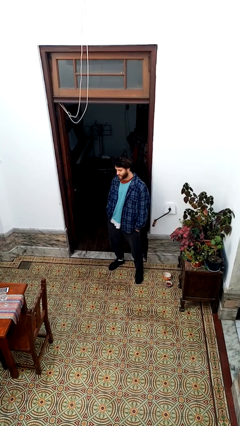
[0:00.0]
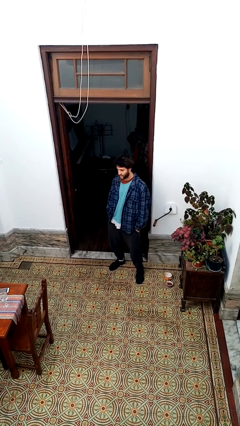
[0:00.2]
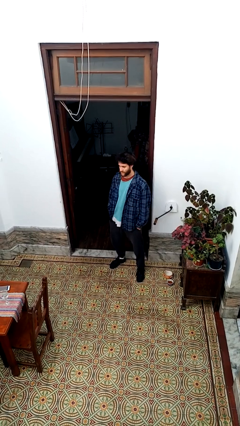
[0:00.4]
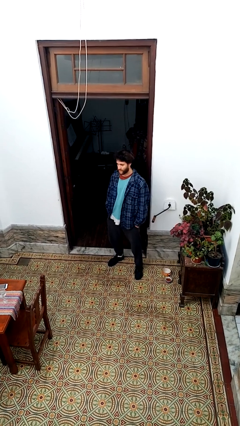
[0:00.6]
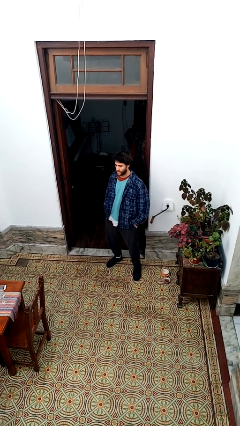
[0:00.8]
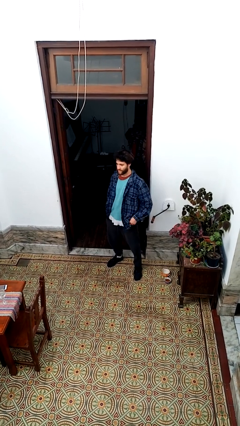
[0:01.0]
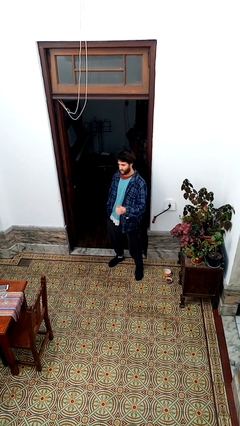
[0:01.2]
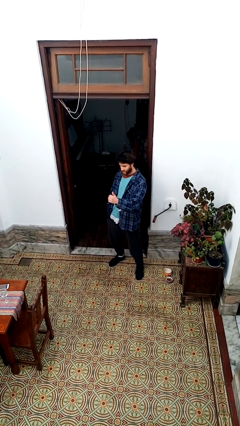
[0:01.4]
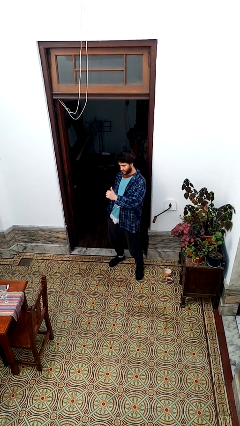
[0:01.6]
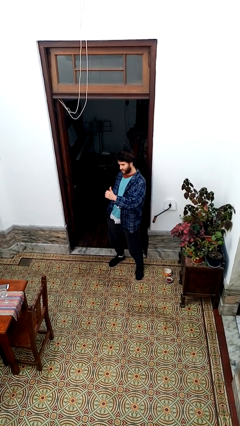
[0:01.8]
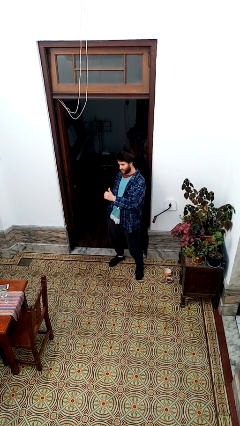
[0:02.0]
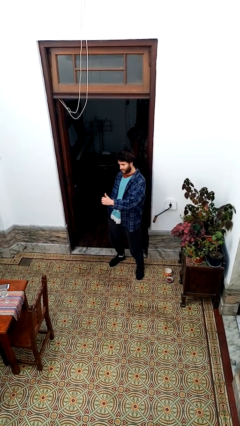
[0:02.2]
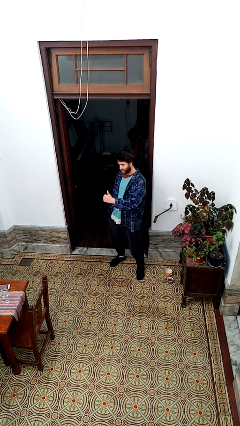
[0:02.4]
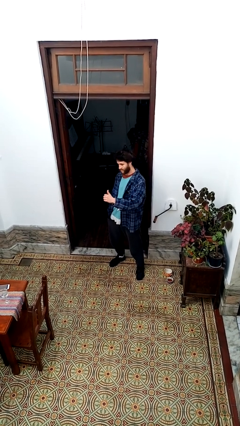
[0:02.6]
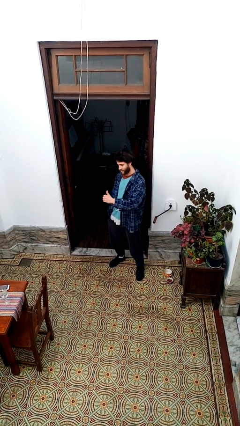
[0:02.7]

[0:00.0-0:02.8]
person gestures thumbs up

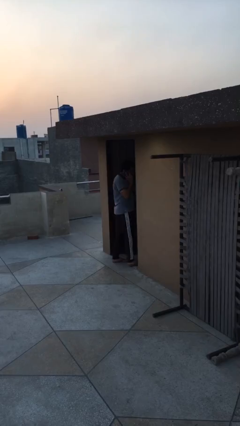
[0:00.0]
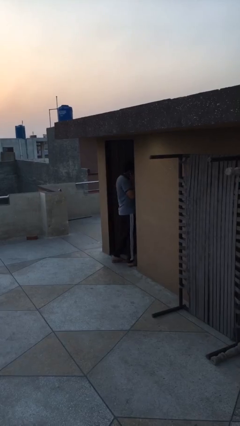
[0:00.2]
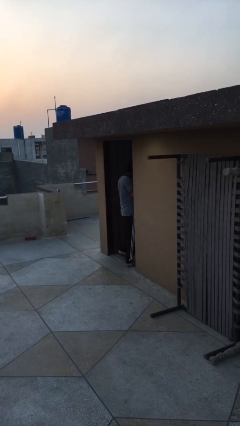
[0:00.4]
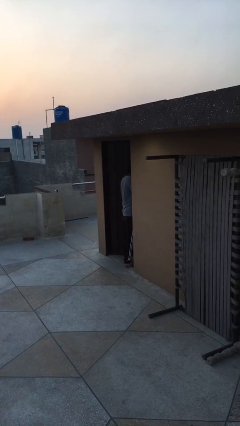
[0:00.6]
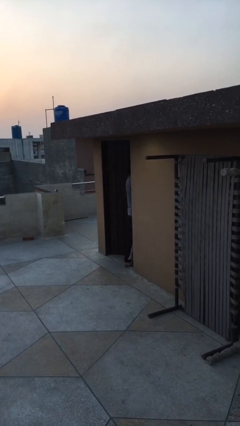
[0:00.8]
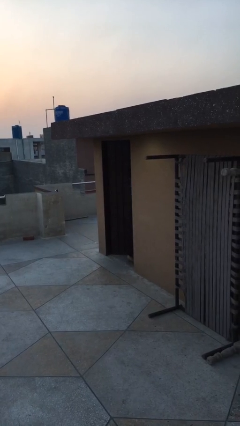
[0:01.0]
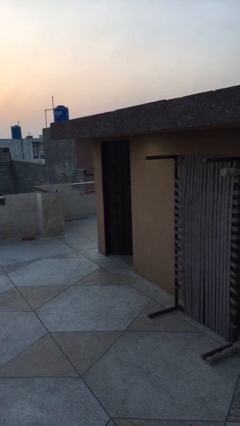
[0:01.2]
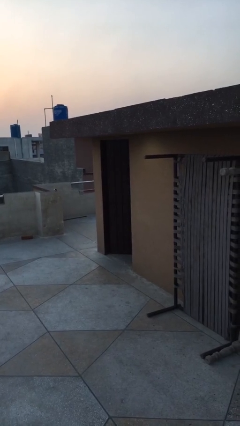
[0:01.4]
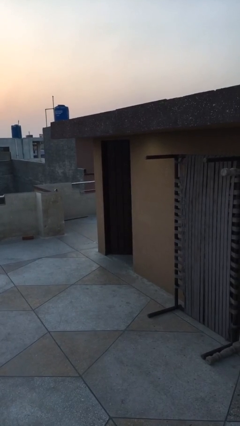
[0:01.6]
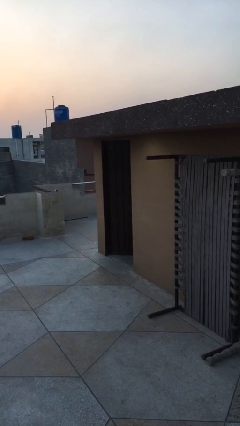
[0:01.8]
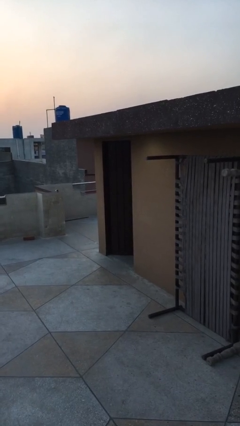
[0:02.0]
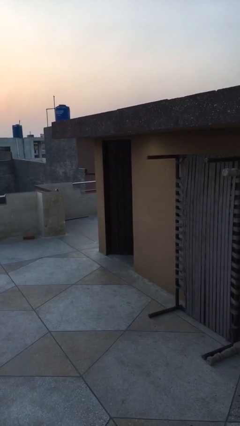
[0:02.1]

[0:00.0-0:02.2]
person exits scene through structure

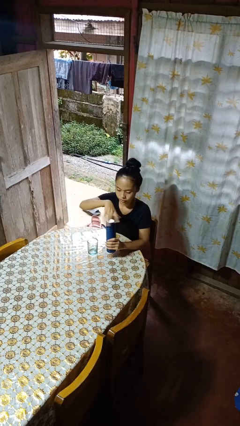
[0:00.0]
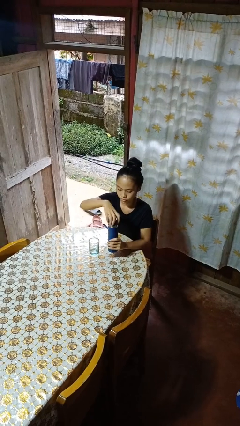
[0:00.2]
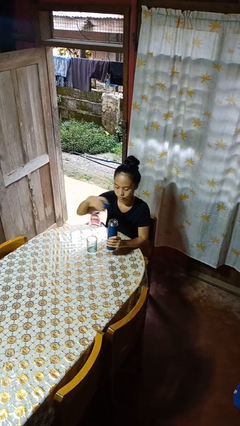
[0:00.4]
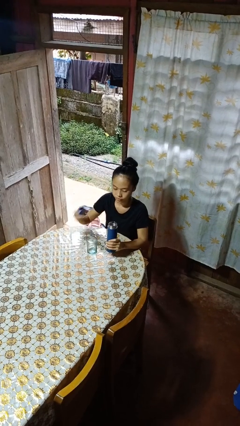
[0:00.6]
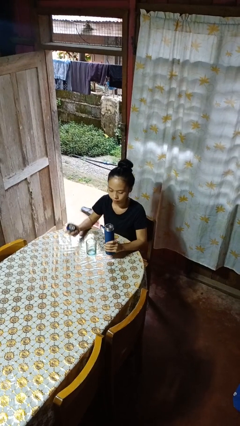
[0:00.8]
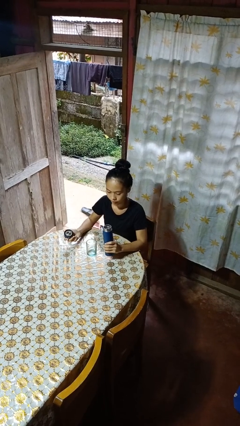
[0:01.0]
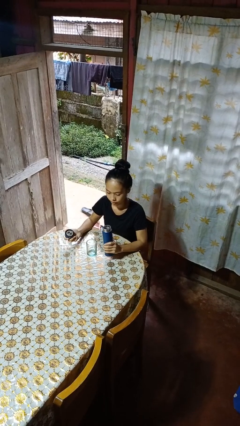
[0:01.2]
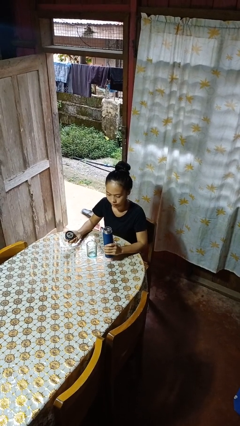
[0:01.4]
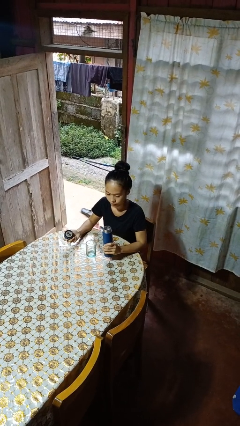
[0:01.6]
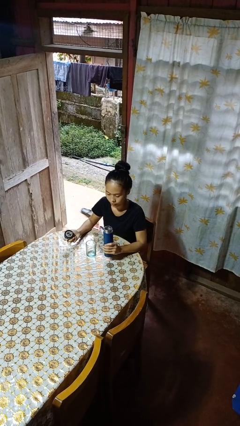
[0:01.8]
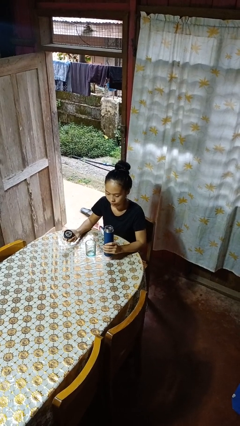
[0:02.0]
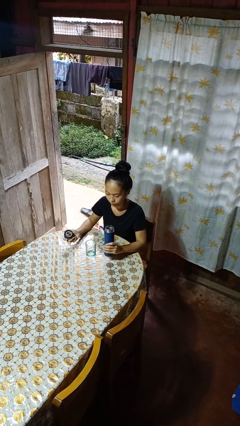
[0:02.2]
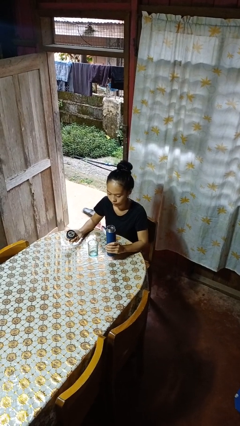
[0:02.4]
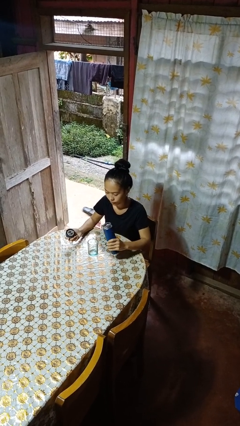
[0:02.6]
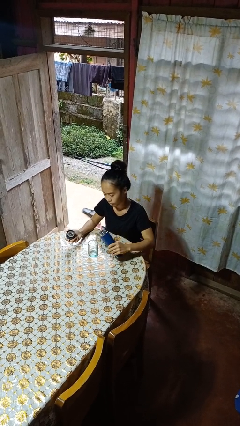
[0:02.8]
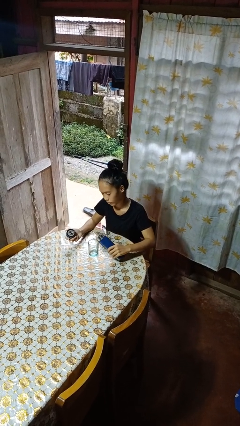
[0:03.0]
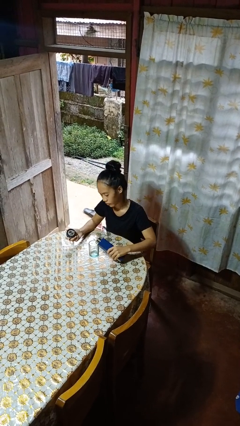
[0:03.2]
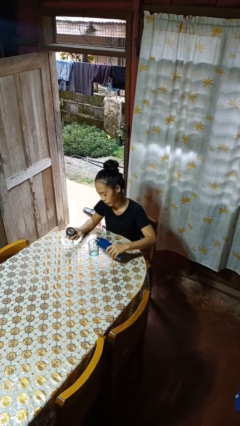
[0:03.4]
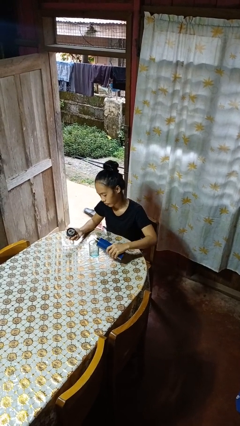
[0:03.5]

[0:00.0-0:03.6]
person unscrews lid from bottle

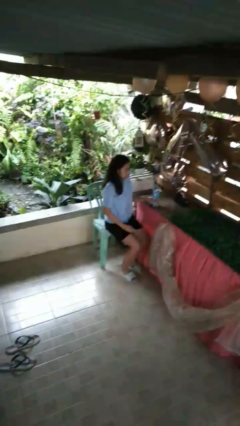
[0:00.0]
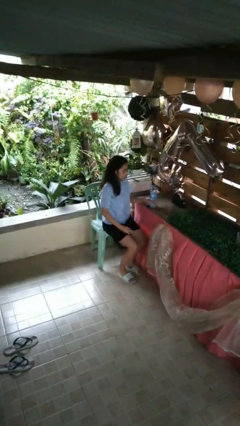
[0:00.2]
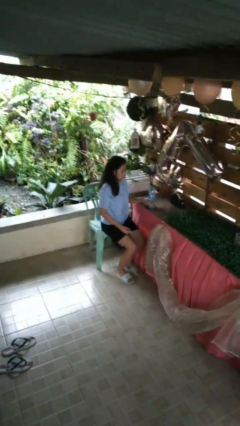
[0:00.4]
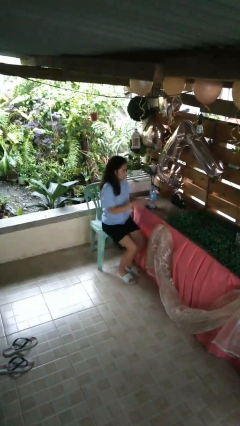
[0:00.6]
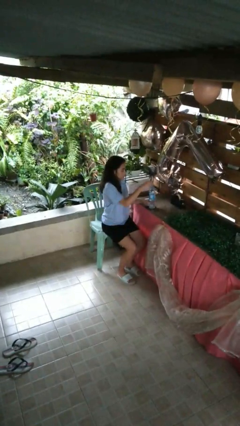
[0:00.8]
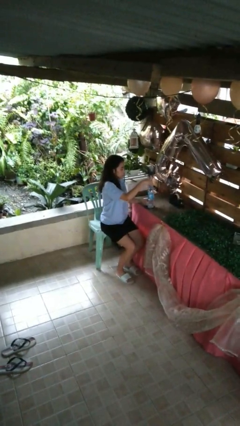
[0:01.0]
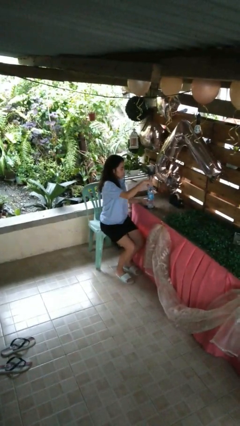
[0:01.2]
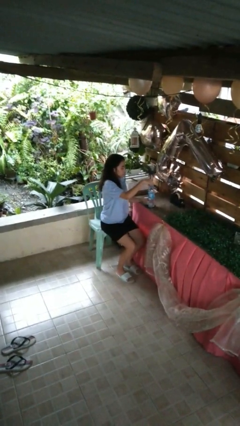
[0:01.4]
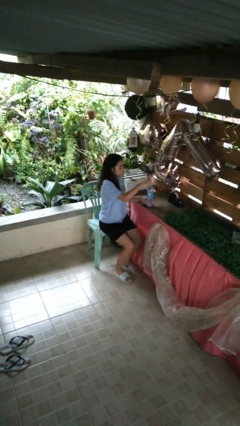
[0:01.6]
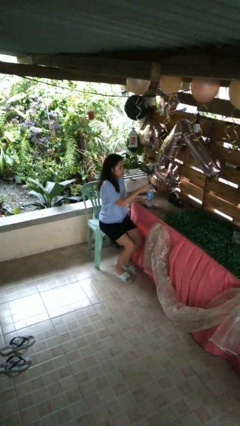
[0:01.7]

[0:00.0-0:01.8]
person screws lid to bottle

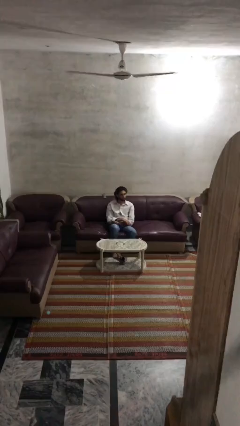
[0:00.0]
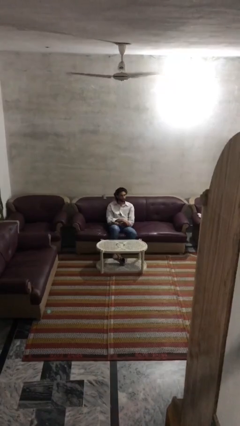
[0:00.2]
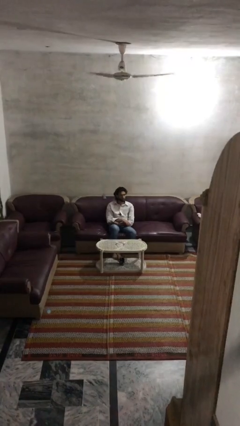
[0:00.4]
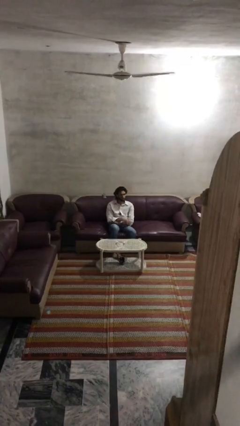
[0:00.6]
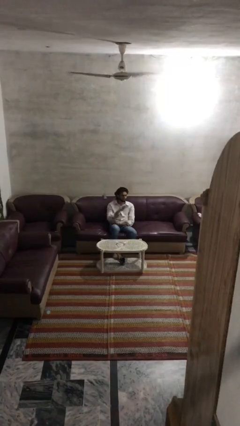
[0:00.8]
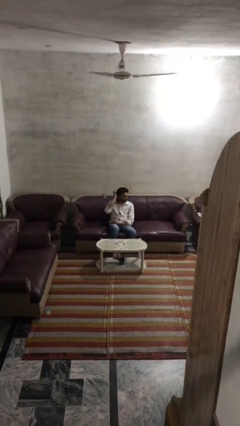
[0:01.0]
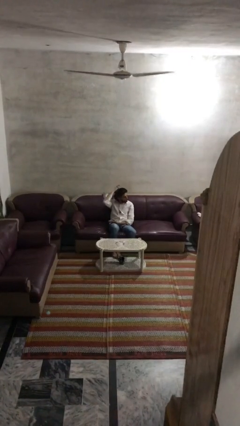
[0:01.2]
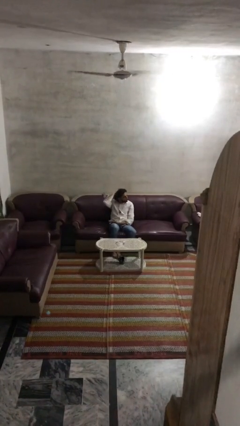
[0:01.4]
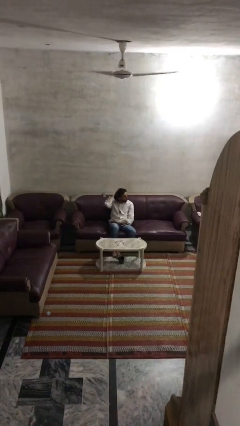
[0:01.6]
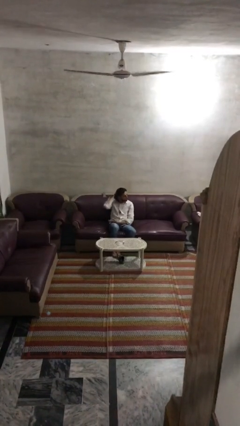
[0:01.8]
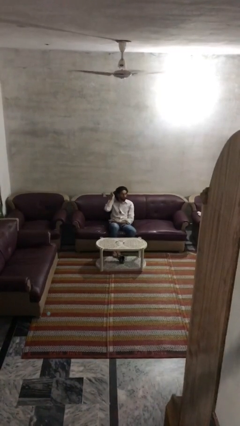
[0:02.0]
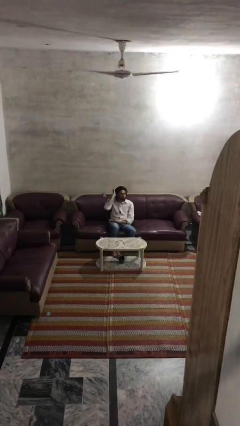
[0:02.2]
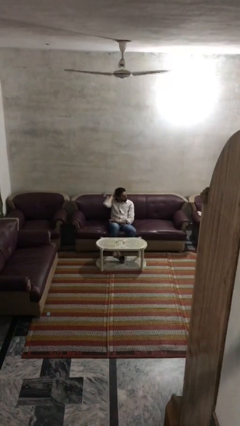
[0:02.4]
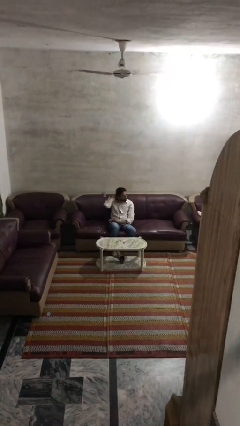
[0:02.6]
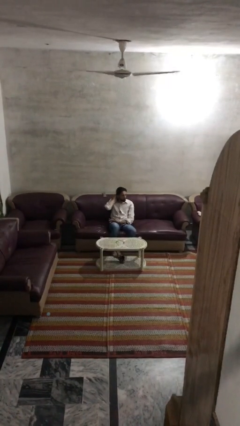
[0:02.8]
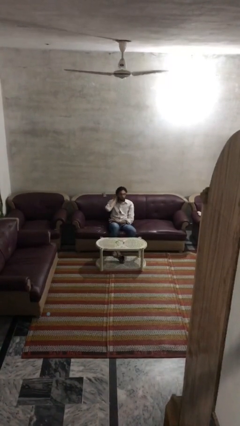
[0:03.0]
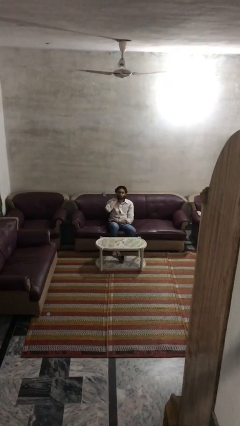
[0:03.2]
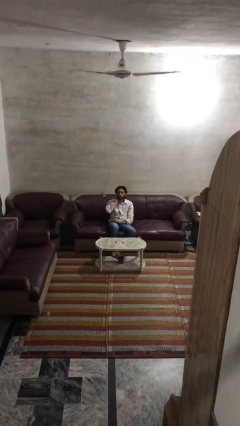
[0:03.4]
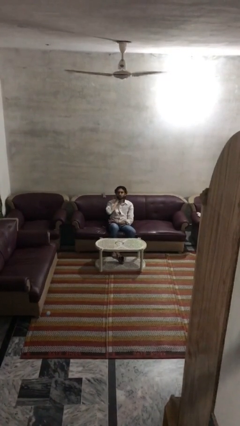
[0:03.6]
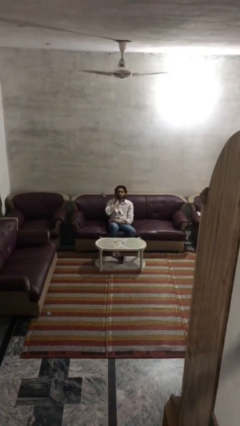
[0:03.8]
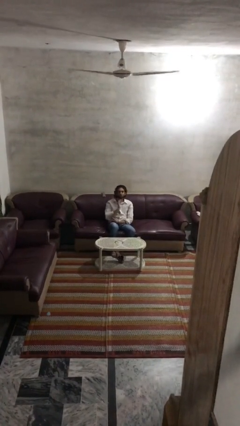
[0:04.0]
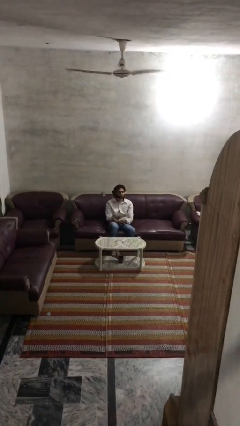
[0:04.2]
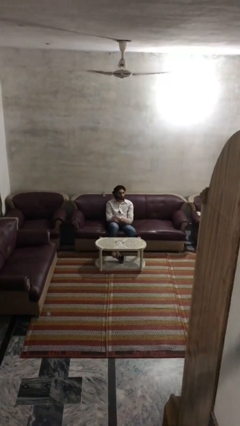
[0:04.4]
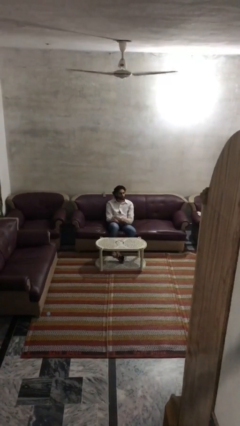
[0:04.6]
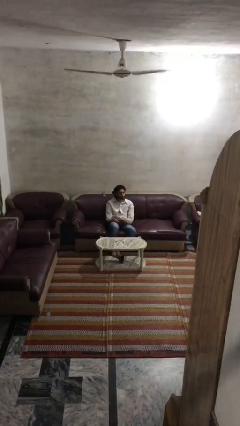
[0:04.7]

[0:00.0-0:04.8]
person strokes hair

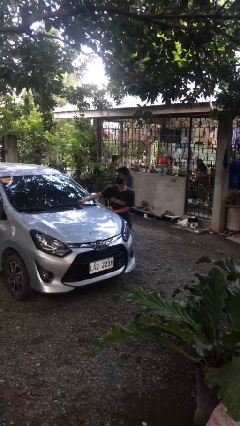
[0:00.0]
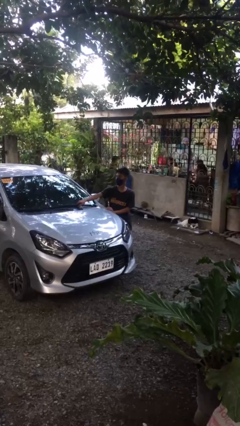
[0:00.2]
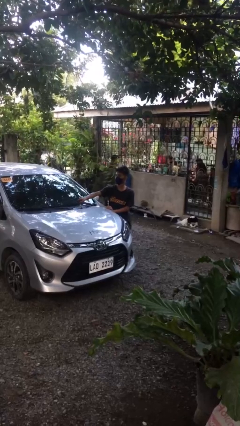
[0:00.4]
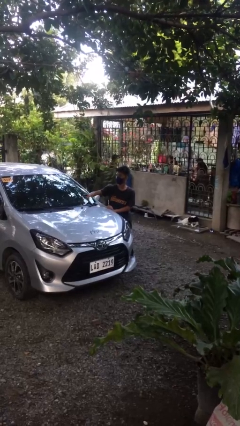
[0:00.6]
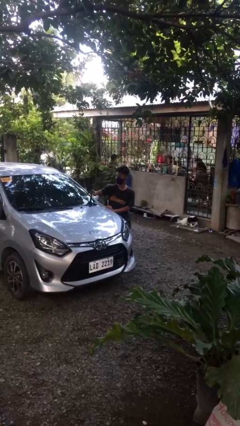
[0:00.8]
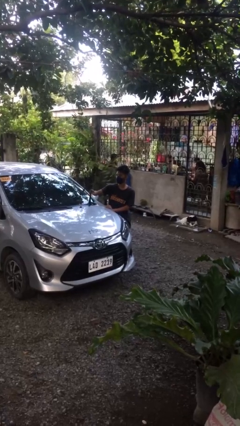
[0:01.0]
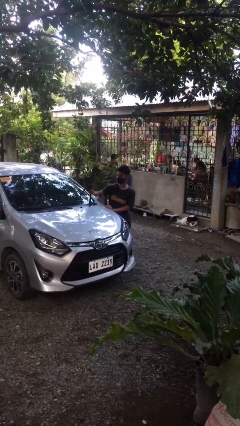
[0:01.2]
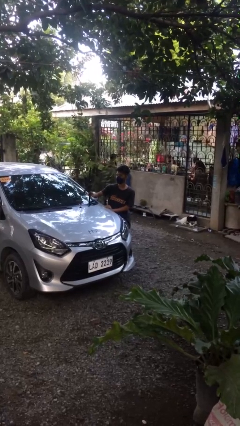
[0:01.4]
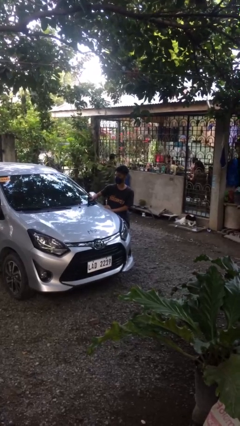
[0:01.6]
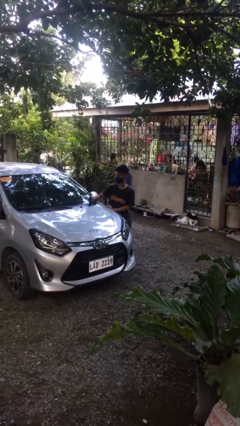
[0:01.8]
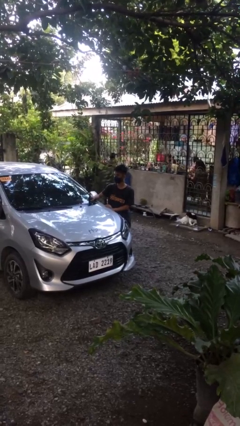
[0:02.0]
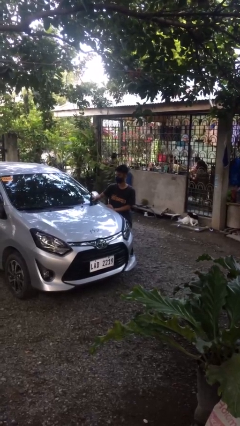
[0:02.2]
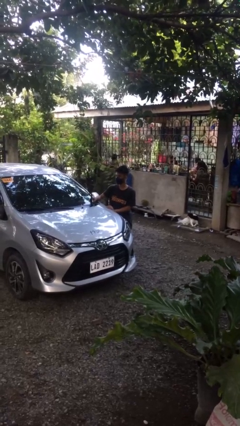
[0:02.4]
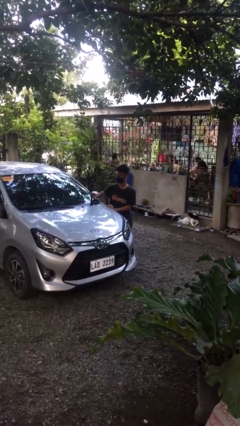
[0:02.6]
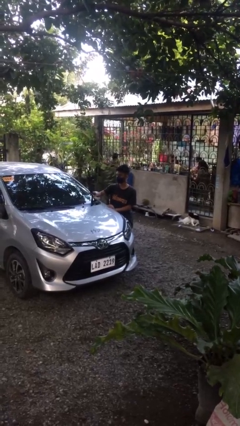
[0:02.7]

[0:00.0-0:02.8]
person flips up car wipers
